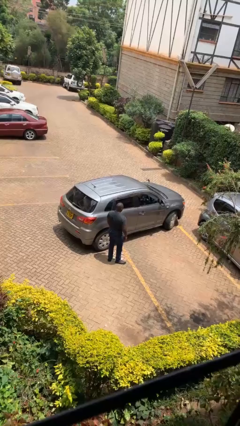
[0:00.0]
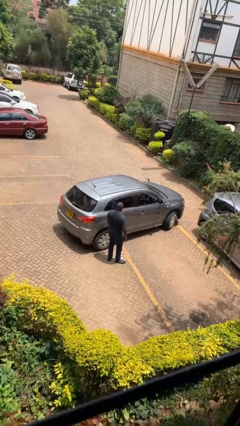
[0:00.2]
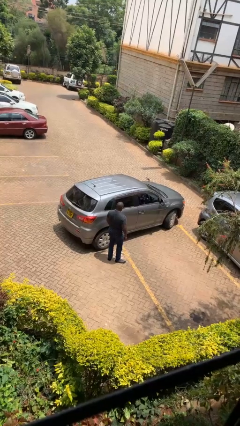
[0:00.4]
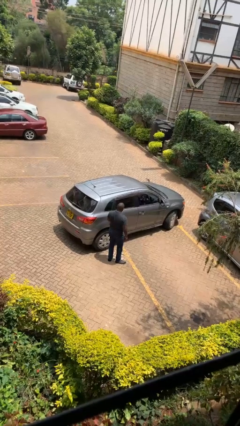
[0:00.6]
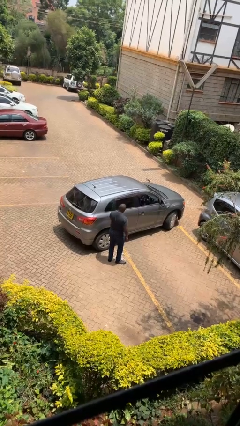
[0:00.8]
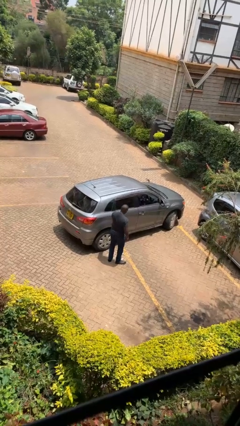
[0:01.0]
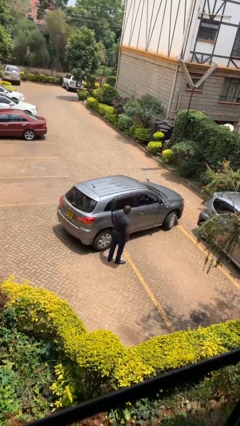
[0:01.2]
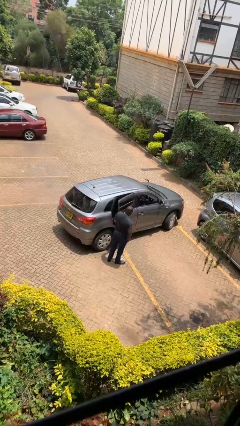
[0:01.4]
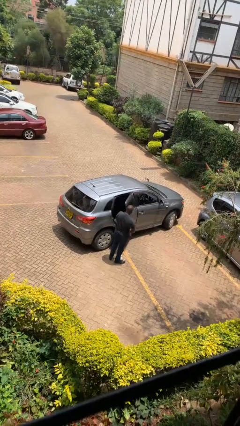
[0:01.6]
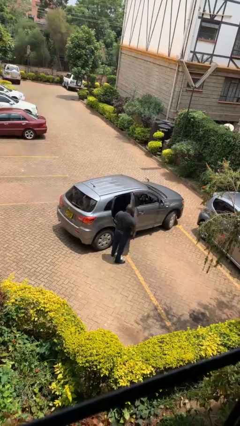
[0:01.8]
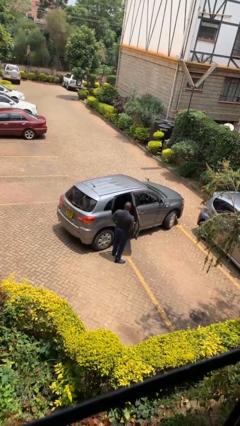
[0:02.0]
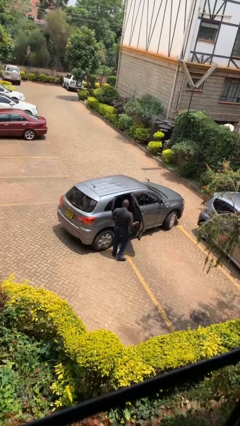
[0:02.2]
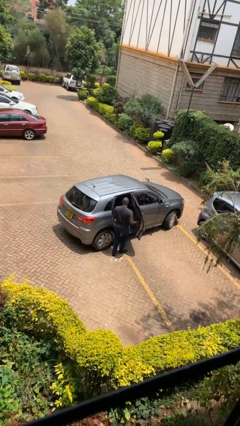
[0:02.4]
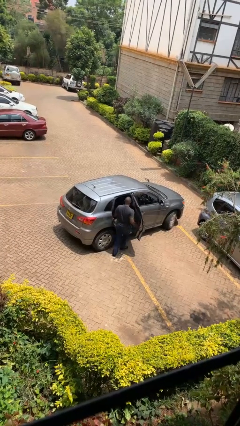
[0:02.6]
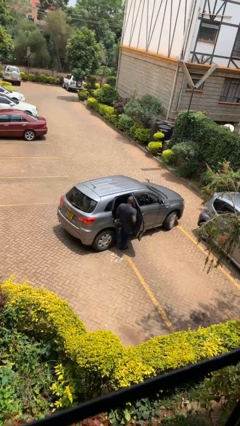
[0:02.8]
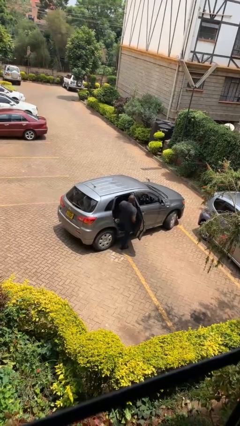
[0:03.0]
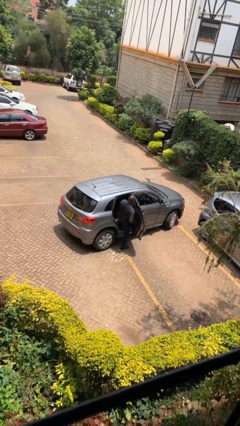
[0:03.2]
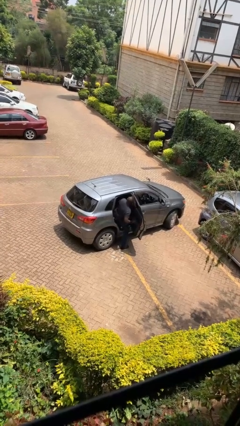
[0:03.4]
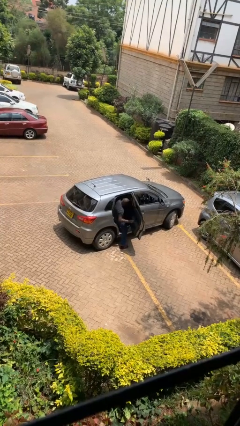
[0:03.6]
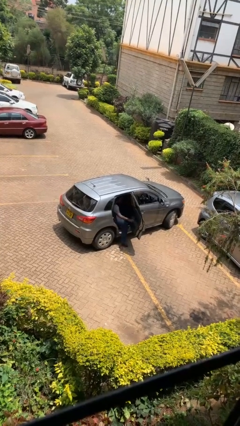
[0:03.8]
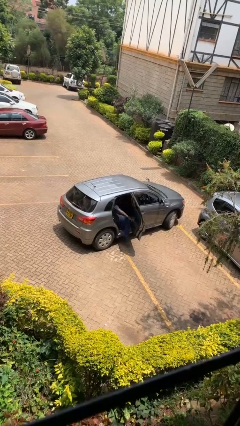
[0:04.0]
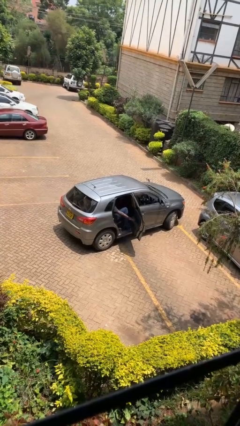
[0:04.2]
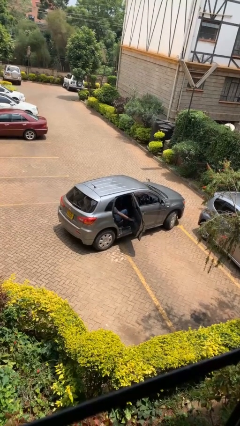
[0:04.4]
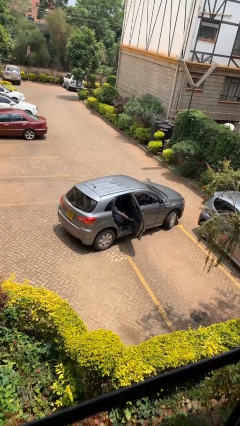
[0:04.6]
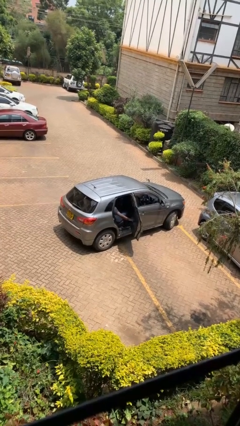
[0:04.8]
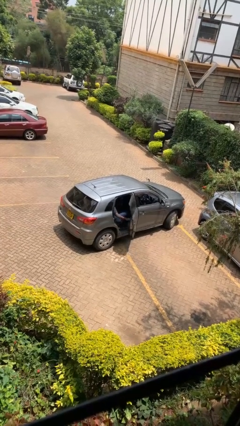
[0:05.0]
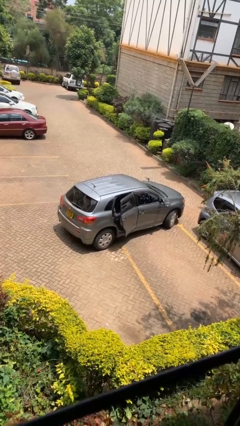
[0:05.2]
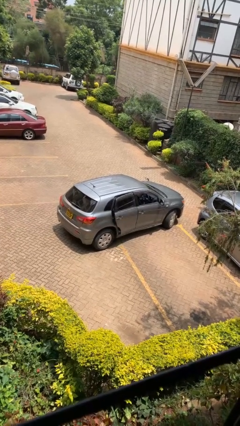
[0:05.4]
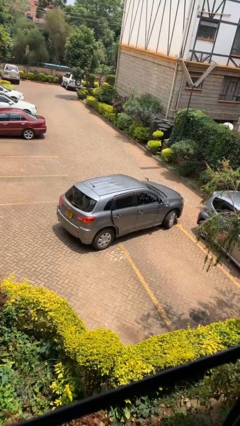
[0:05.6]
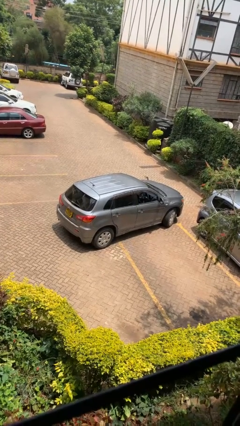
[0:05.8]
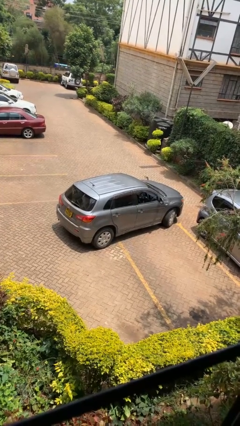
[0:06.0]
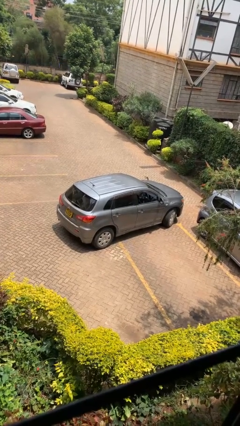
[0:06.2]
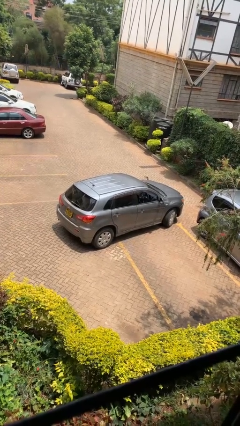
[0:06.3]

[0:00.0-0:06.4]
car picks up person

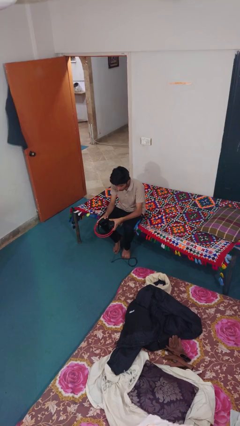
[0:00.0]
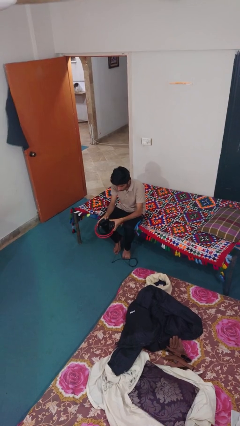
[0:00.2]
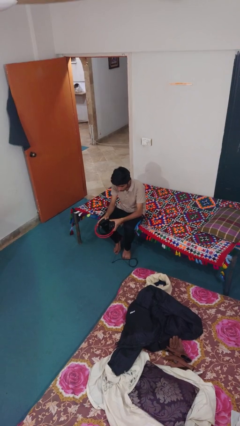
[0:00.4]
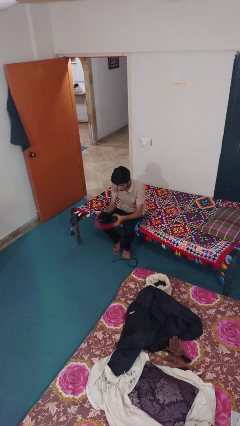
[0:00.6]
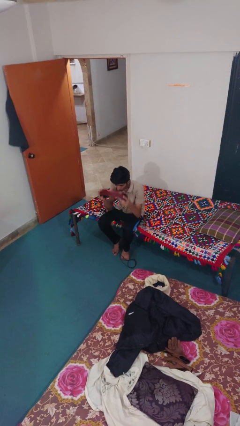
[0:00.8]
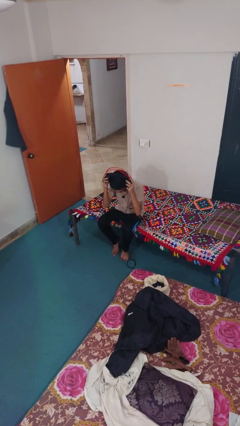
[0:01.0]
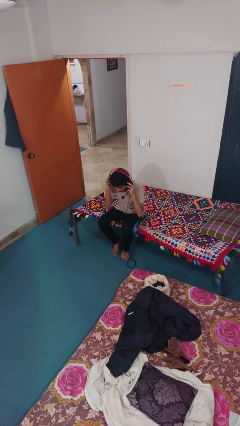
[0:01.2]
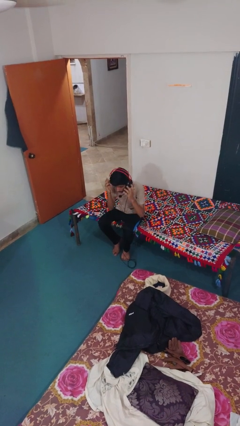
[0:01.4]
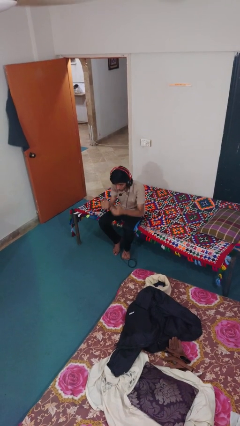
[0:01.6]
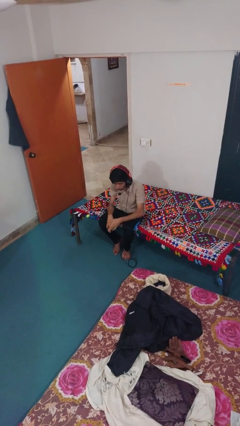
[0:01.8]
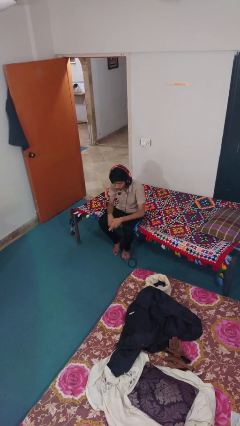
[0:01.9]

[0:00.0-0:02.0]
person puts on headphones

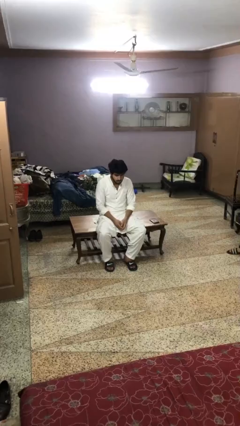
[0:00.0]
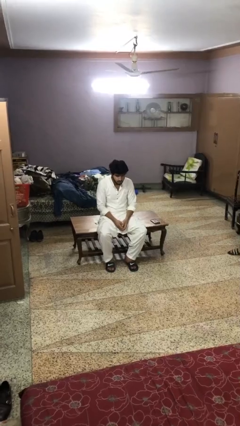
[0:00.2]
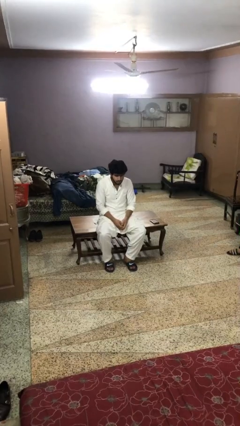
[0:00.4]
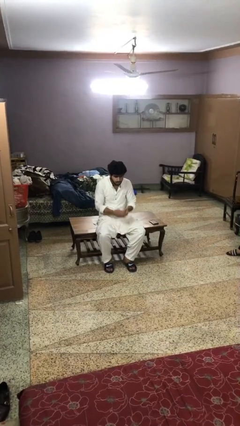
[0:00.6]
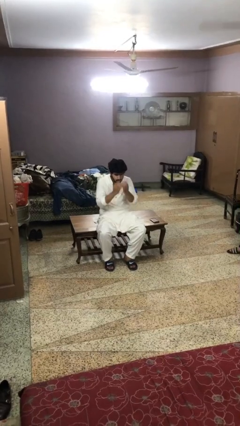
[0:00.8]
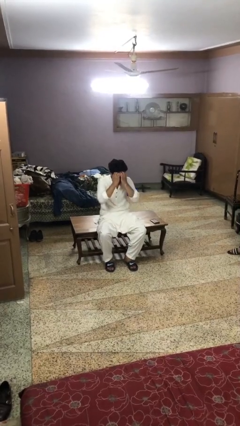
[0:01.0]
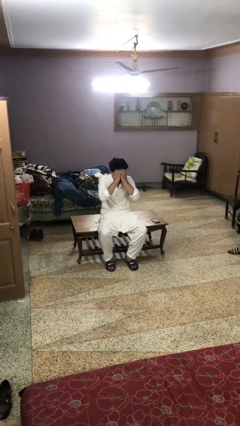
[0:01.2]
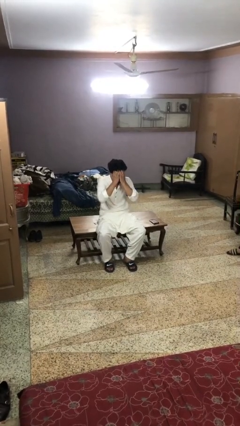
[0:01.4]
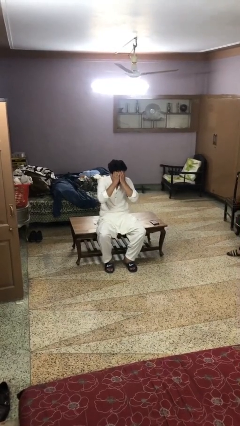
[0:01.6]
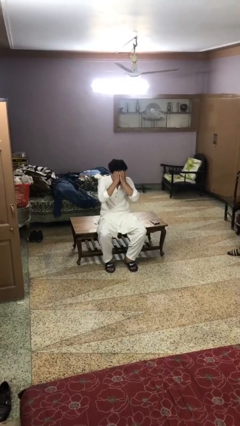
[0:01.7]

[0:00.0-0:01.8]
person covers face with hands

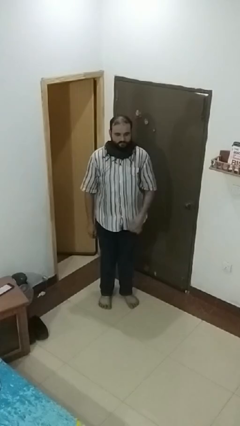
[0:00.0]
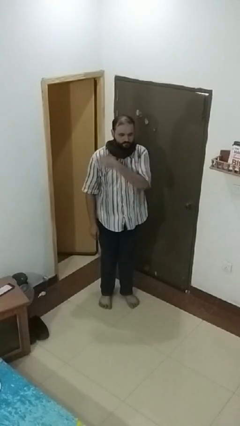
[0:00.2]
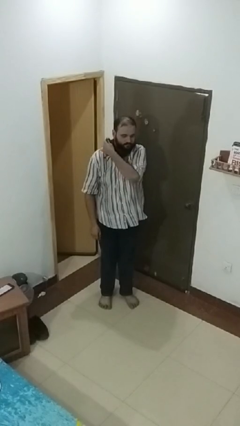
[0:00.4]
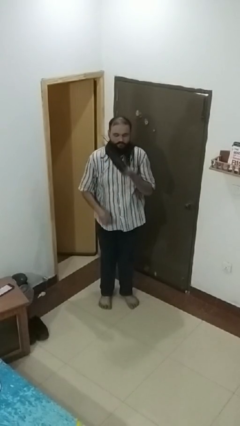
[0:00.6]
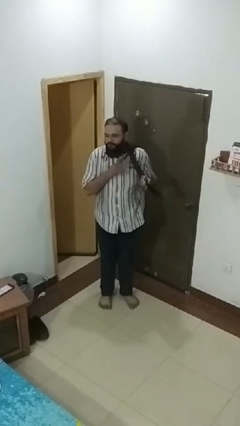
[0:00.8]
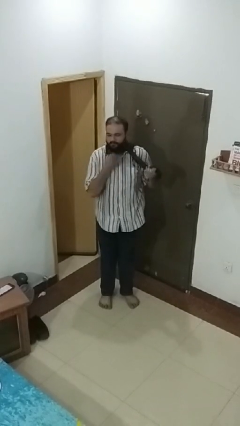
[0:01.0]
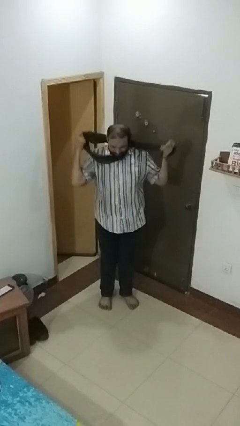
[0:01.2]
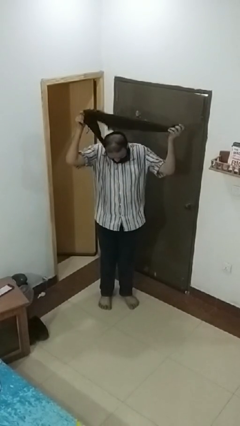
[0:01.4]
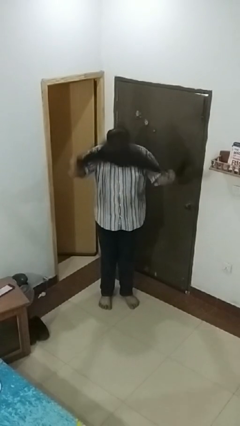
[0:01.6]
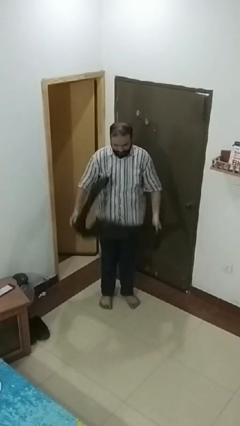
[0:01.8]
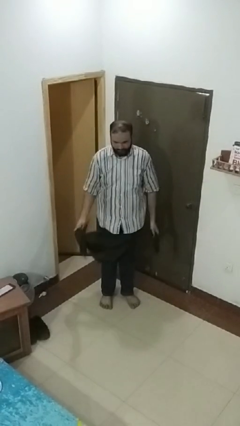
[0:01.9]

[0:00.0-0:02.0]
person takes off scarf

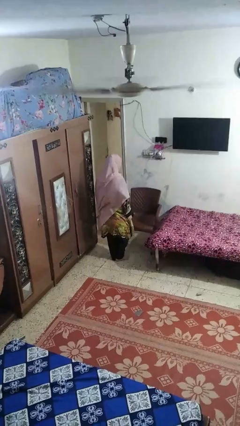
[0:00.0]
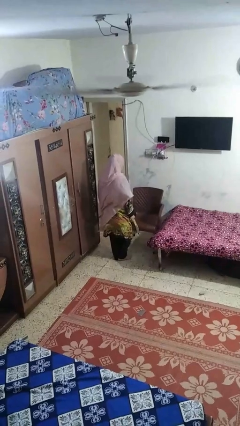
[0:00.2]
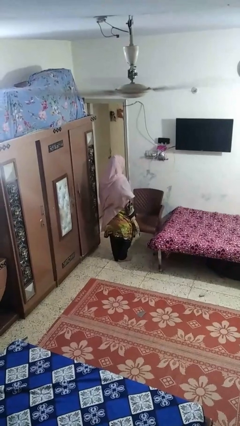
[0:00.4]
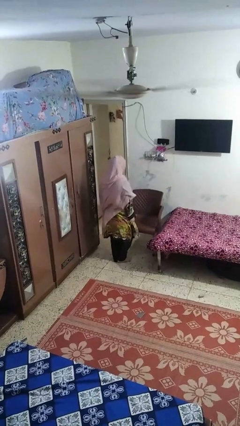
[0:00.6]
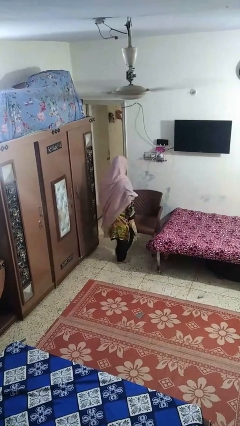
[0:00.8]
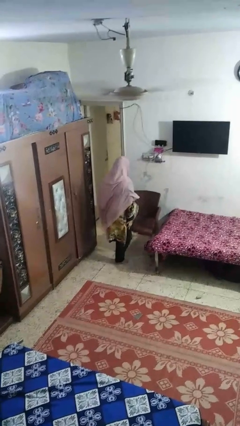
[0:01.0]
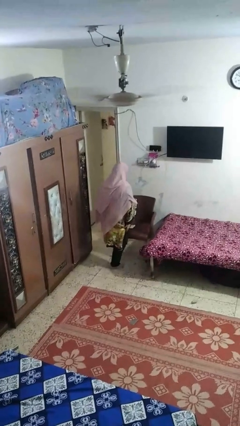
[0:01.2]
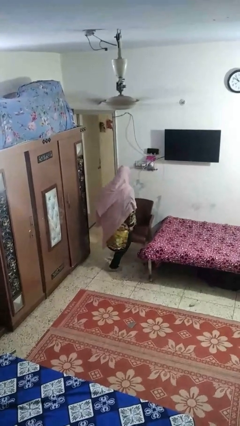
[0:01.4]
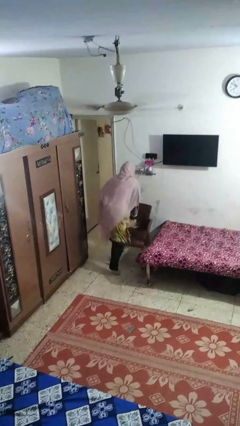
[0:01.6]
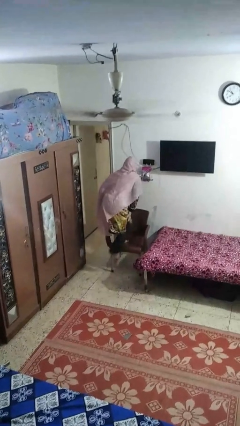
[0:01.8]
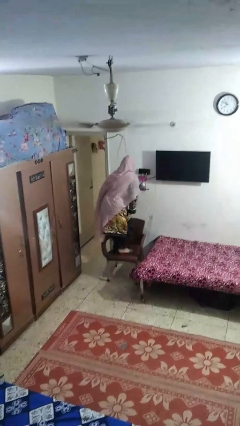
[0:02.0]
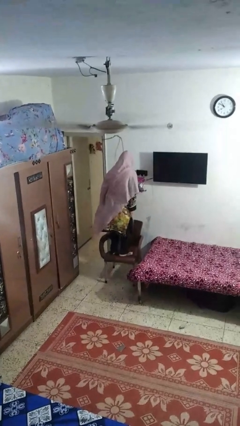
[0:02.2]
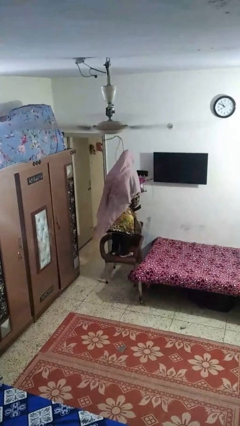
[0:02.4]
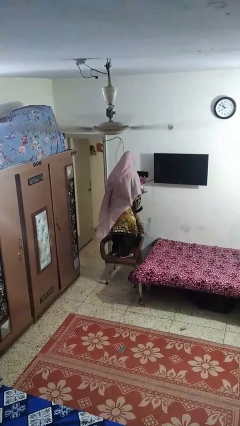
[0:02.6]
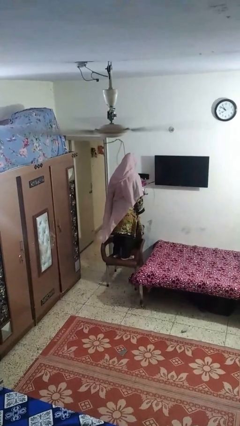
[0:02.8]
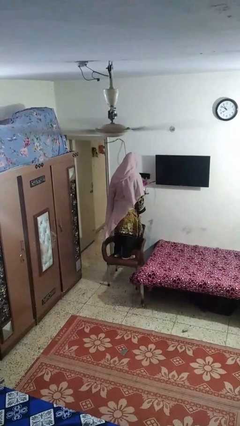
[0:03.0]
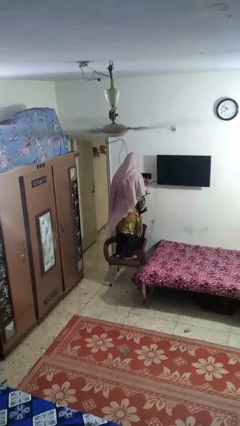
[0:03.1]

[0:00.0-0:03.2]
person climbs on chair

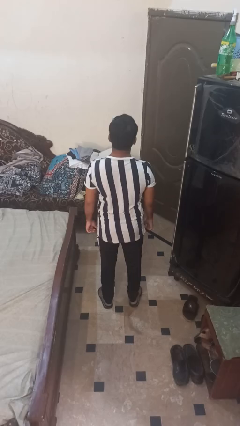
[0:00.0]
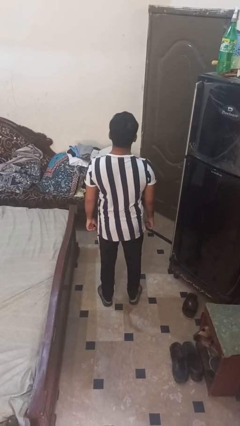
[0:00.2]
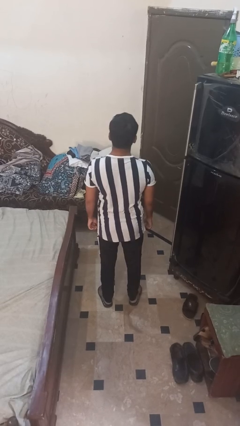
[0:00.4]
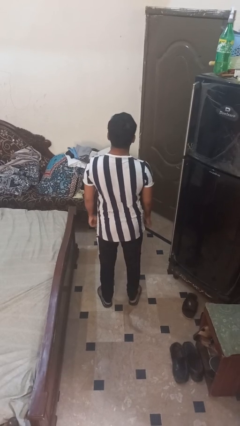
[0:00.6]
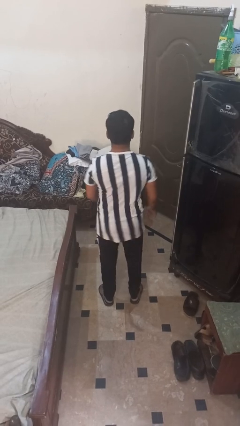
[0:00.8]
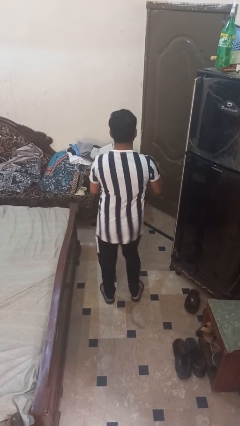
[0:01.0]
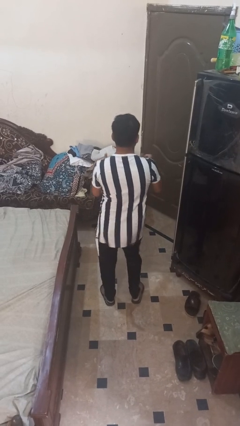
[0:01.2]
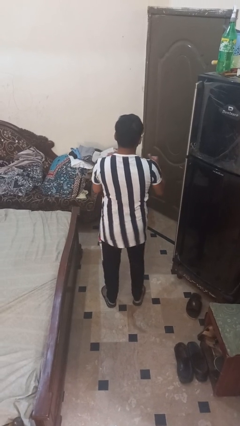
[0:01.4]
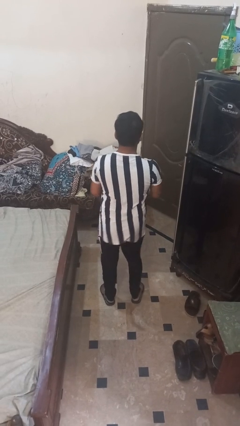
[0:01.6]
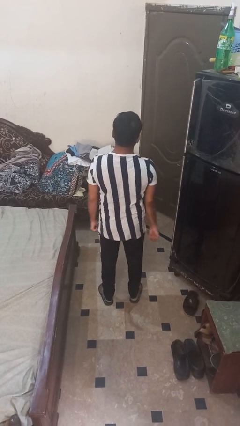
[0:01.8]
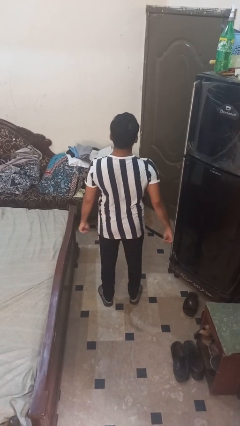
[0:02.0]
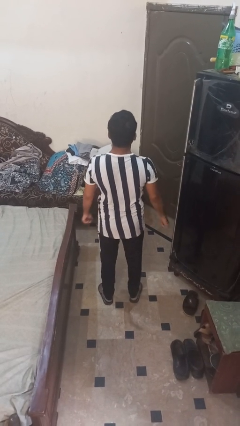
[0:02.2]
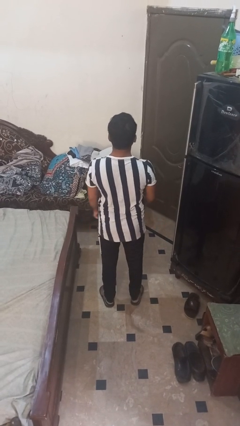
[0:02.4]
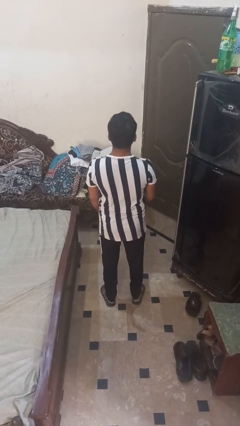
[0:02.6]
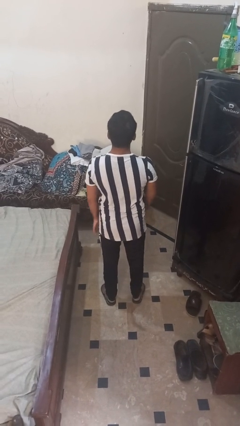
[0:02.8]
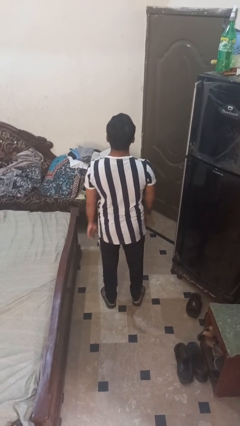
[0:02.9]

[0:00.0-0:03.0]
person wiggles hips
